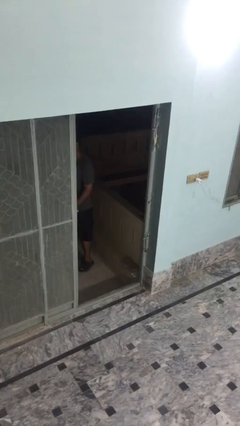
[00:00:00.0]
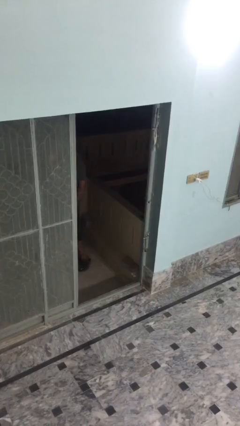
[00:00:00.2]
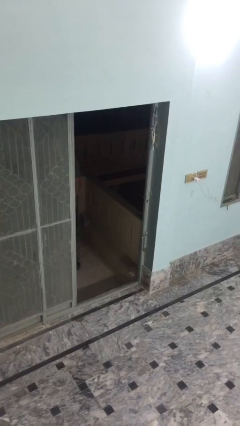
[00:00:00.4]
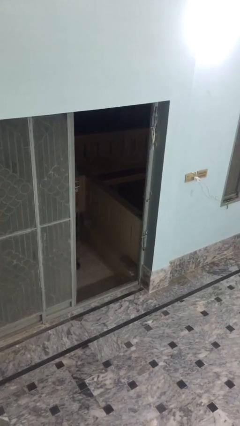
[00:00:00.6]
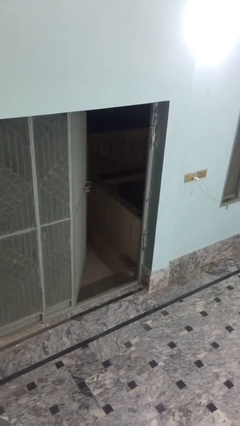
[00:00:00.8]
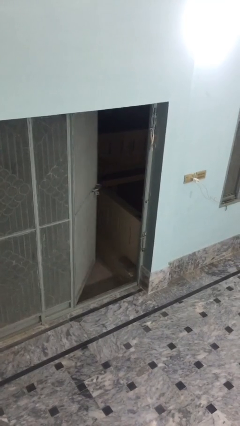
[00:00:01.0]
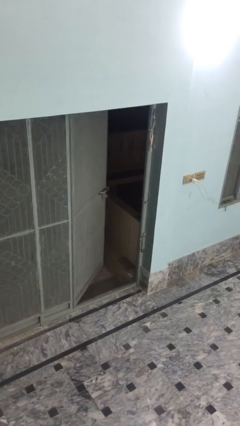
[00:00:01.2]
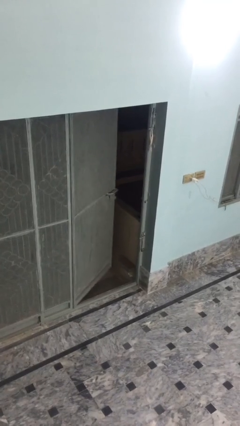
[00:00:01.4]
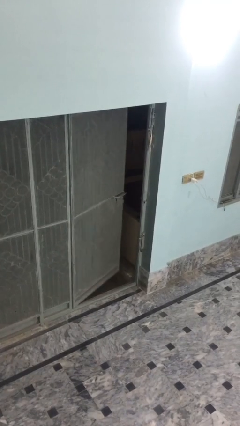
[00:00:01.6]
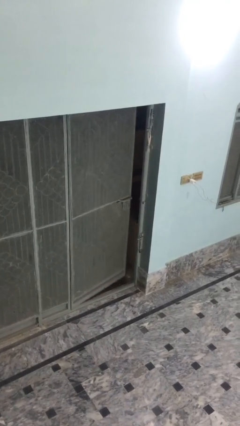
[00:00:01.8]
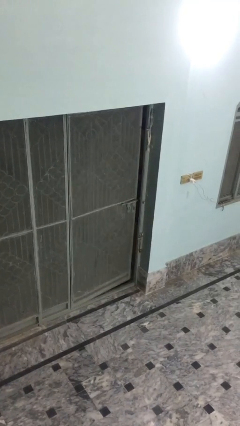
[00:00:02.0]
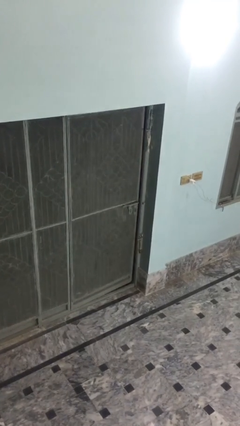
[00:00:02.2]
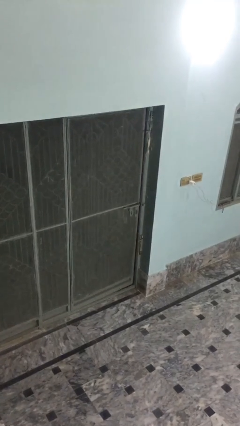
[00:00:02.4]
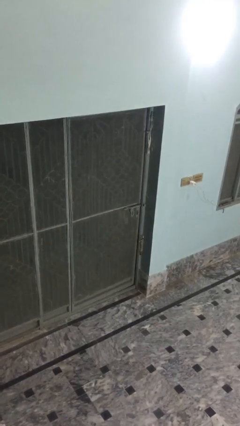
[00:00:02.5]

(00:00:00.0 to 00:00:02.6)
person closes facility door

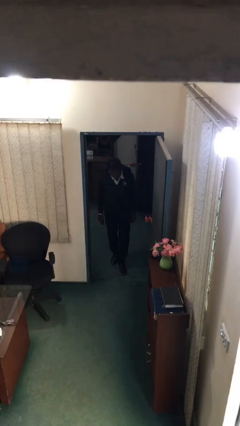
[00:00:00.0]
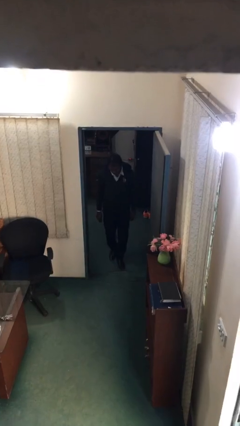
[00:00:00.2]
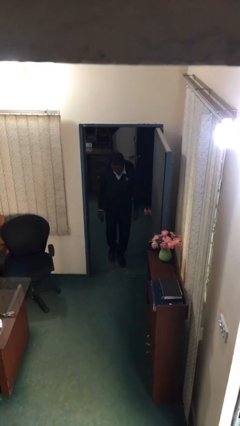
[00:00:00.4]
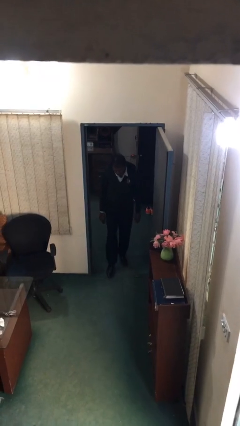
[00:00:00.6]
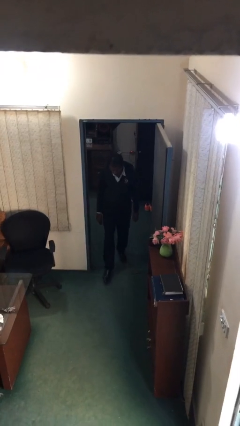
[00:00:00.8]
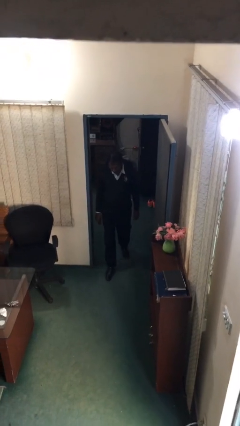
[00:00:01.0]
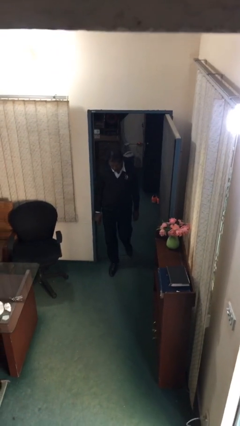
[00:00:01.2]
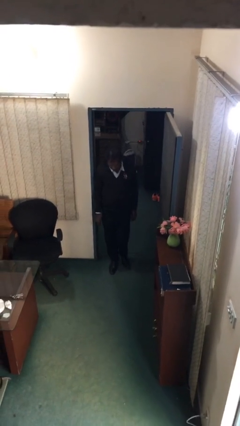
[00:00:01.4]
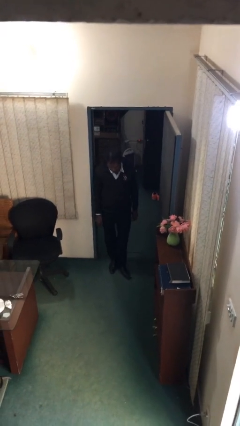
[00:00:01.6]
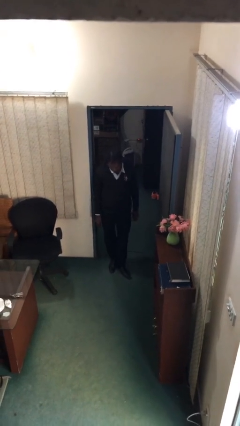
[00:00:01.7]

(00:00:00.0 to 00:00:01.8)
person enters scene through structure

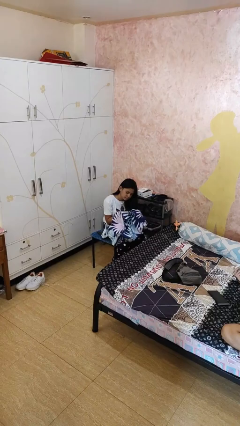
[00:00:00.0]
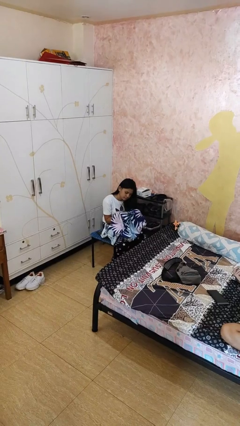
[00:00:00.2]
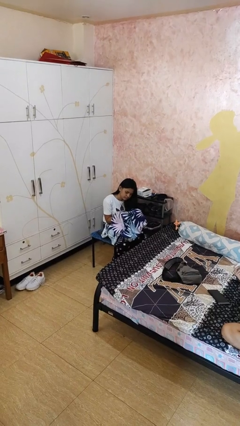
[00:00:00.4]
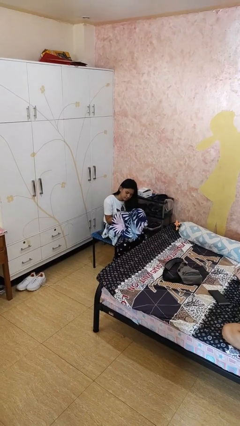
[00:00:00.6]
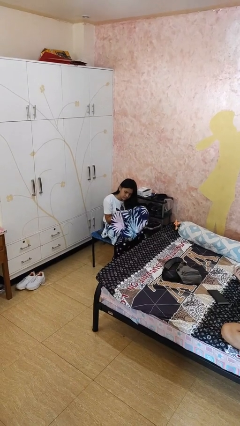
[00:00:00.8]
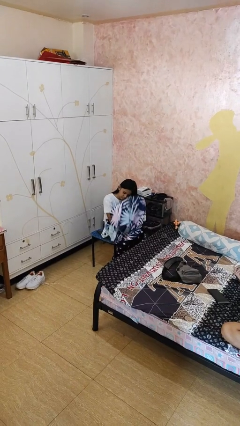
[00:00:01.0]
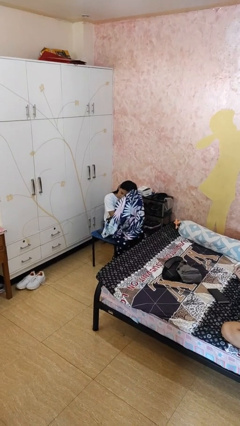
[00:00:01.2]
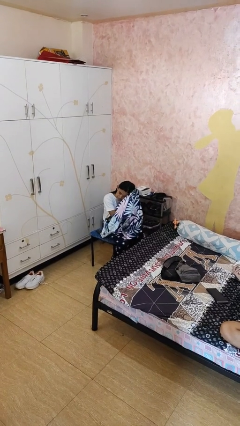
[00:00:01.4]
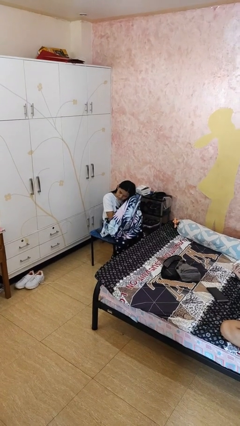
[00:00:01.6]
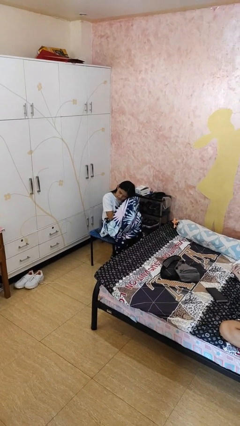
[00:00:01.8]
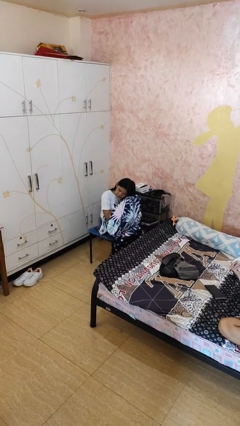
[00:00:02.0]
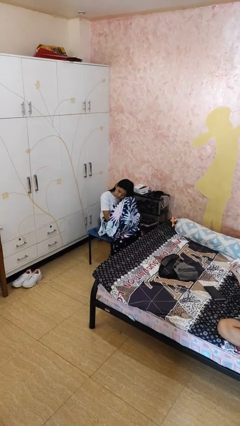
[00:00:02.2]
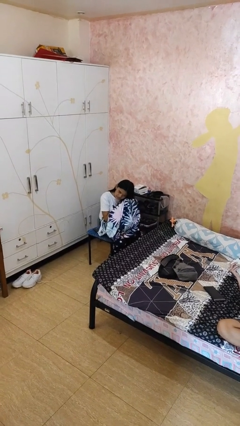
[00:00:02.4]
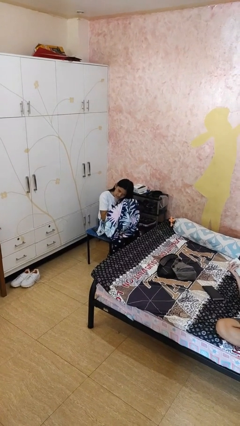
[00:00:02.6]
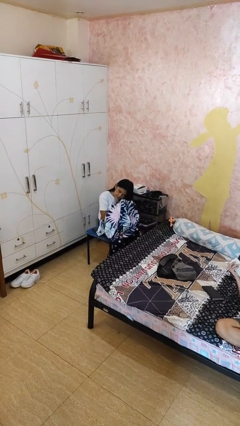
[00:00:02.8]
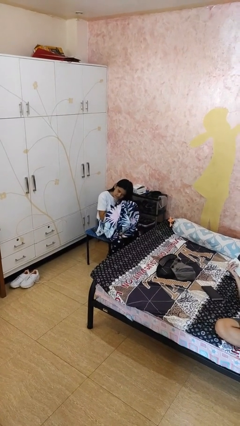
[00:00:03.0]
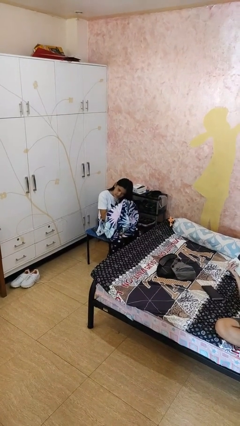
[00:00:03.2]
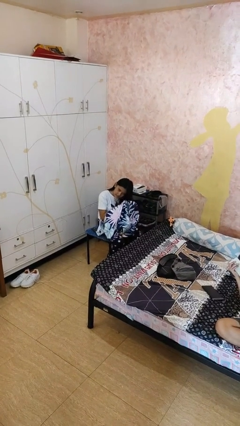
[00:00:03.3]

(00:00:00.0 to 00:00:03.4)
person dries hair with towel

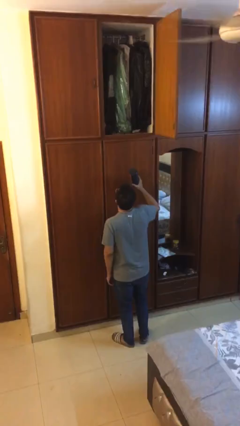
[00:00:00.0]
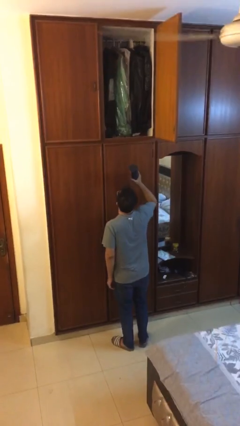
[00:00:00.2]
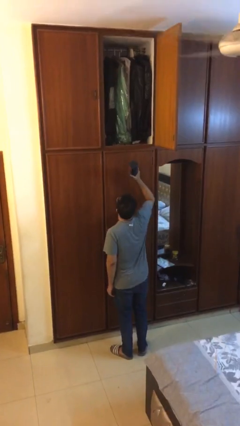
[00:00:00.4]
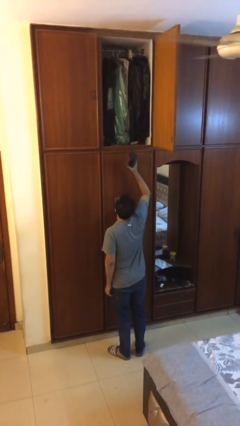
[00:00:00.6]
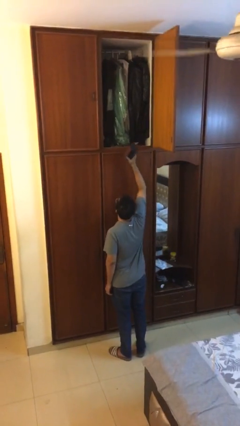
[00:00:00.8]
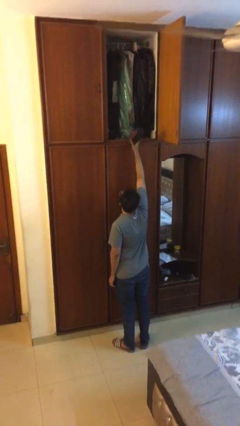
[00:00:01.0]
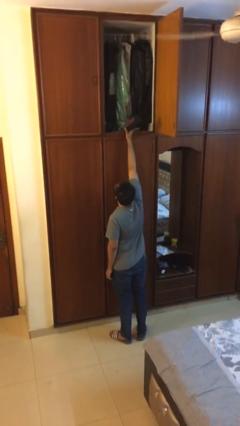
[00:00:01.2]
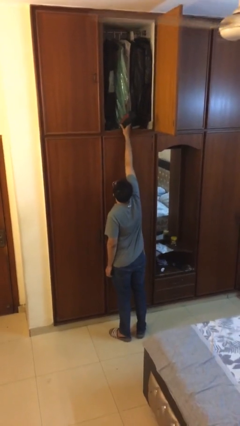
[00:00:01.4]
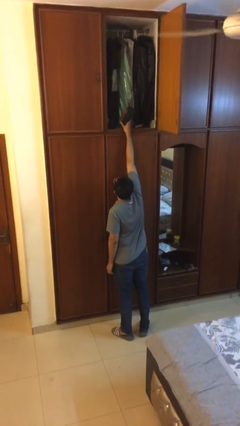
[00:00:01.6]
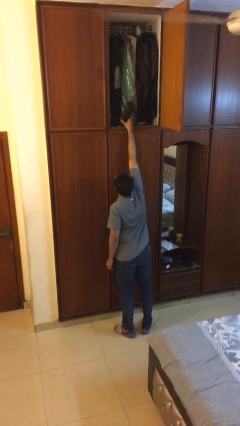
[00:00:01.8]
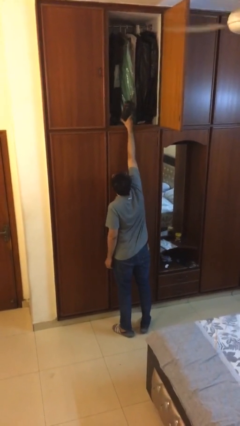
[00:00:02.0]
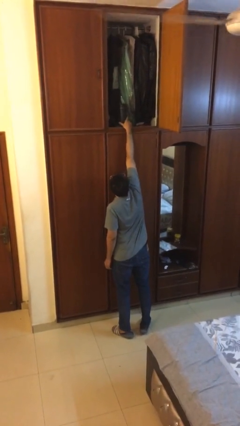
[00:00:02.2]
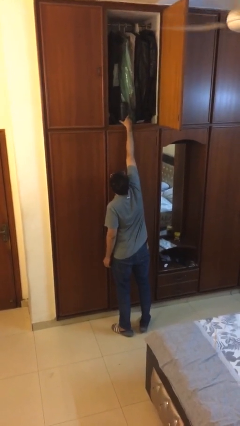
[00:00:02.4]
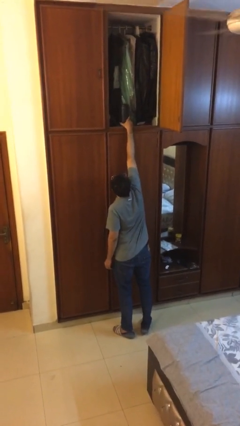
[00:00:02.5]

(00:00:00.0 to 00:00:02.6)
person puts down object on shelf

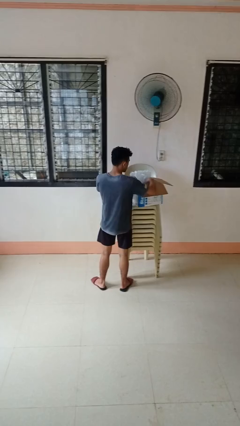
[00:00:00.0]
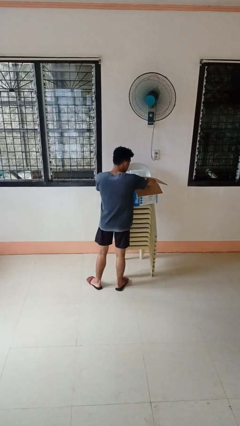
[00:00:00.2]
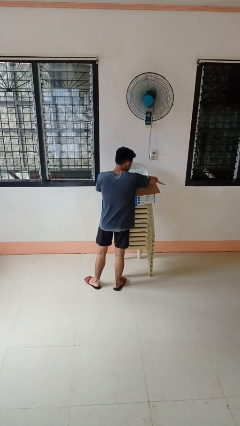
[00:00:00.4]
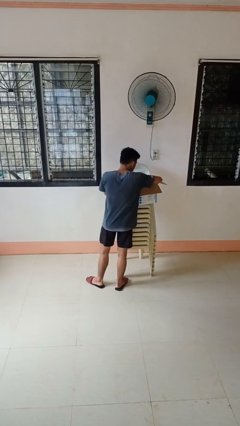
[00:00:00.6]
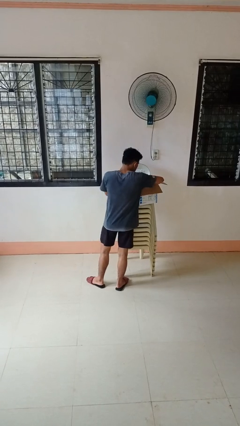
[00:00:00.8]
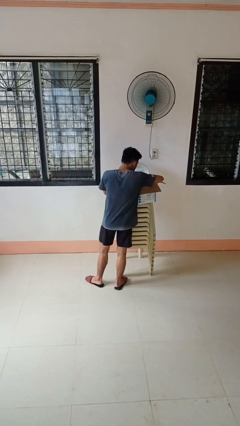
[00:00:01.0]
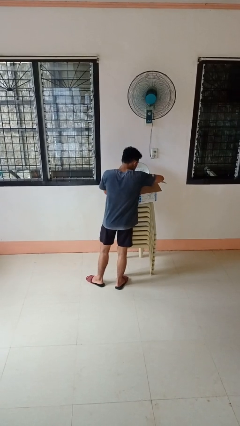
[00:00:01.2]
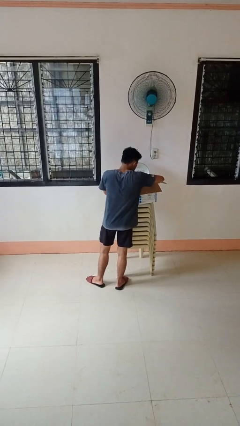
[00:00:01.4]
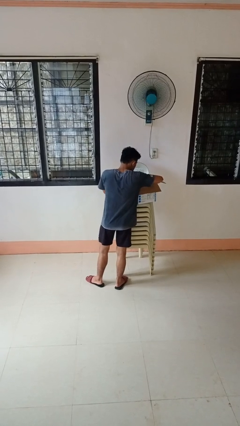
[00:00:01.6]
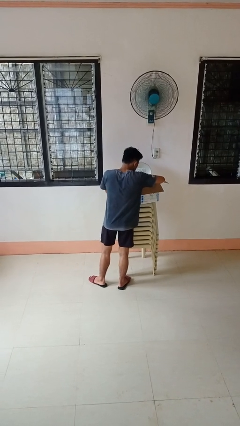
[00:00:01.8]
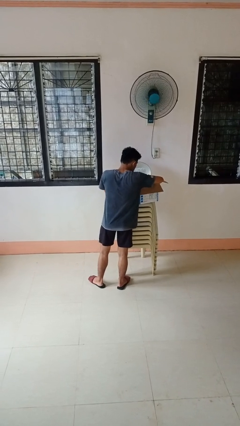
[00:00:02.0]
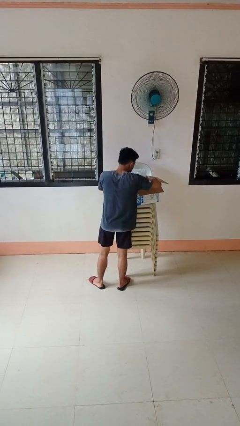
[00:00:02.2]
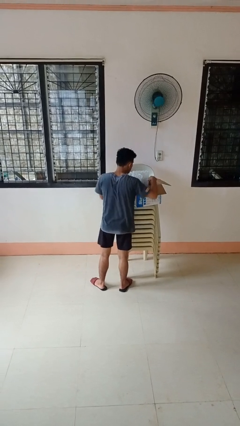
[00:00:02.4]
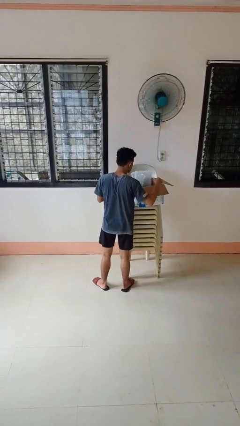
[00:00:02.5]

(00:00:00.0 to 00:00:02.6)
person searches in box

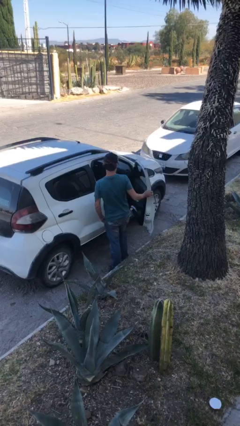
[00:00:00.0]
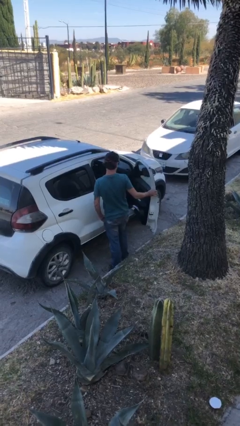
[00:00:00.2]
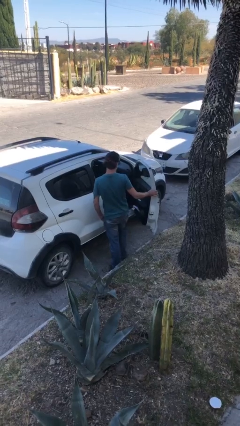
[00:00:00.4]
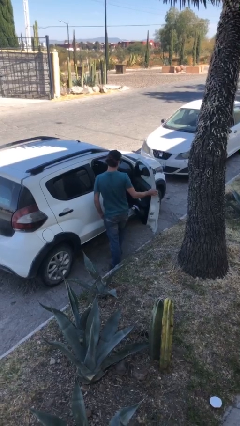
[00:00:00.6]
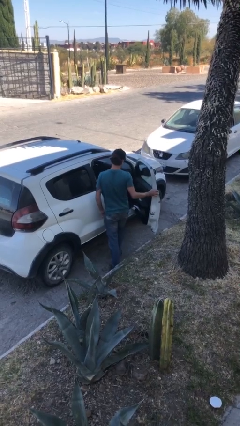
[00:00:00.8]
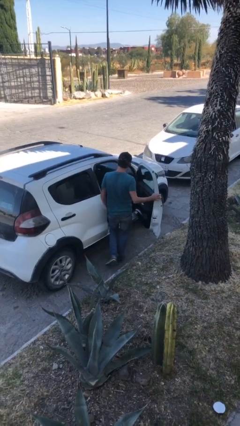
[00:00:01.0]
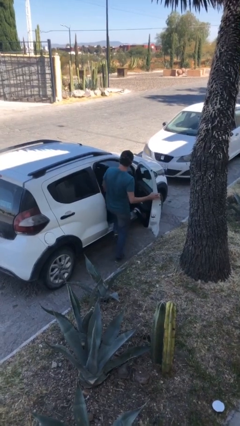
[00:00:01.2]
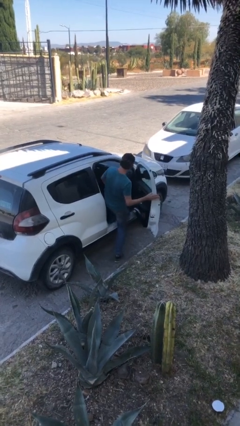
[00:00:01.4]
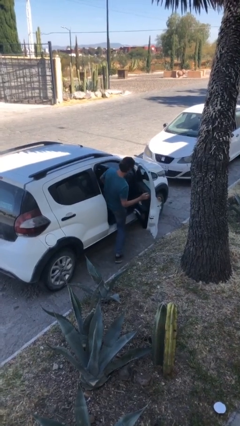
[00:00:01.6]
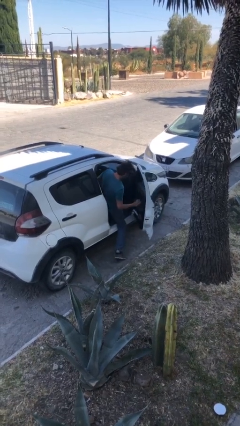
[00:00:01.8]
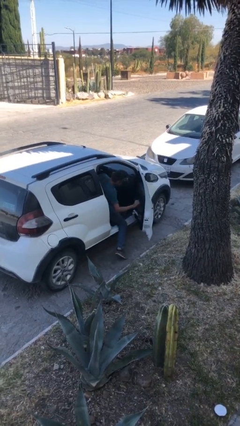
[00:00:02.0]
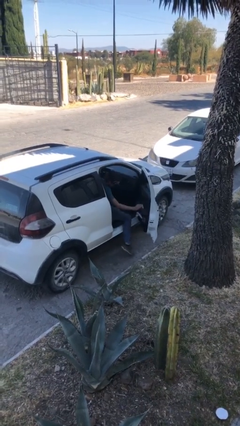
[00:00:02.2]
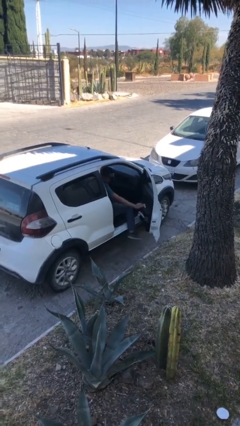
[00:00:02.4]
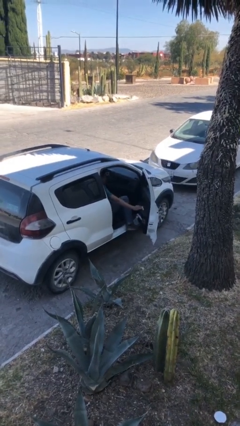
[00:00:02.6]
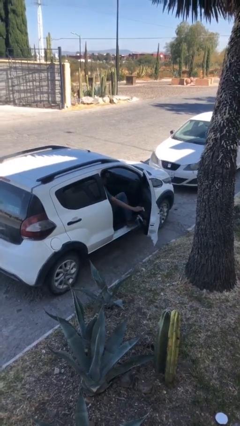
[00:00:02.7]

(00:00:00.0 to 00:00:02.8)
person enters car

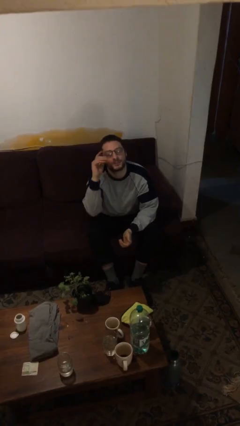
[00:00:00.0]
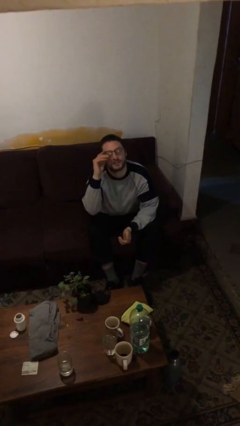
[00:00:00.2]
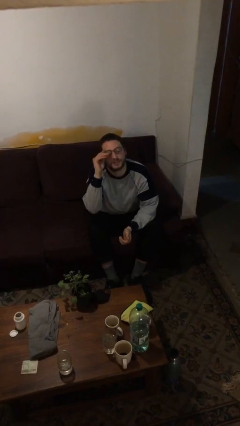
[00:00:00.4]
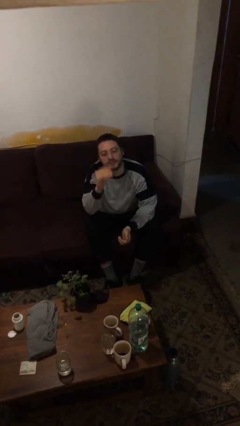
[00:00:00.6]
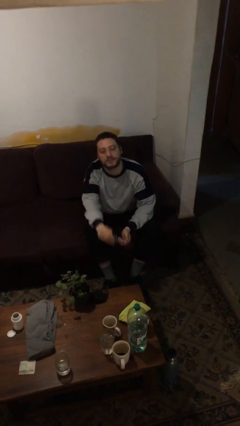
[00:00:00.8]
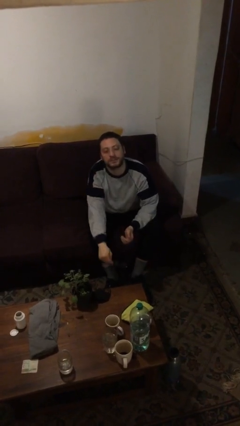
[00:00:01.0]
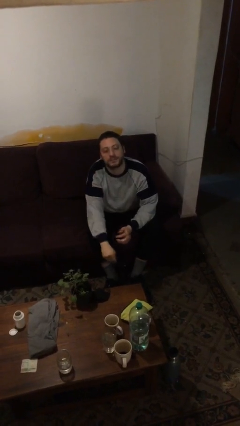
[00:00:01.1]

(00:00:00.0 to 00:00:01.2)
person takes off glasses
